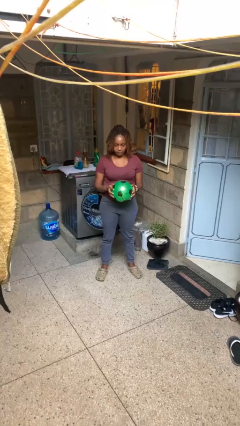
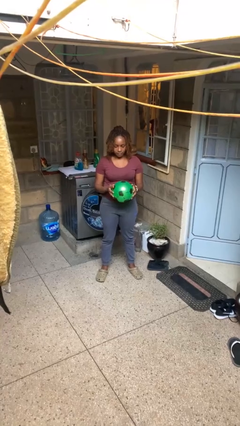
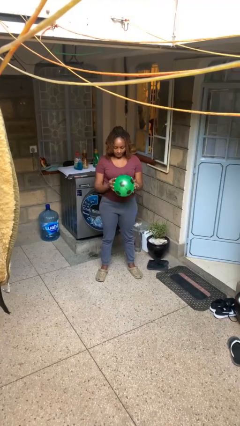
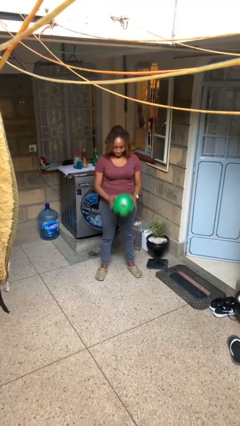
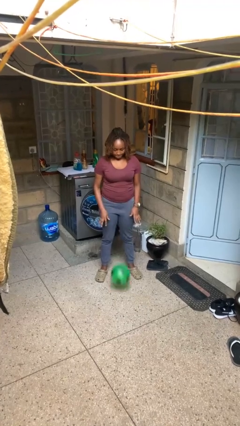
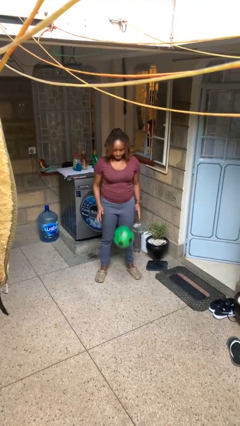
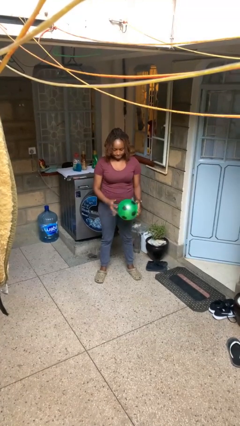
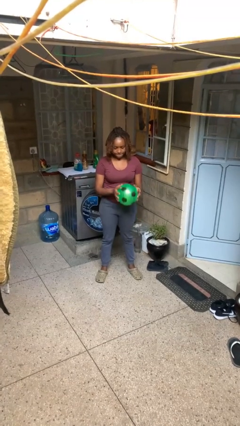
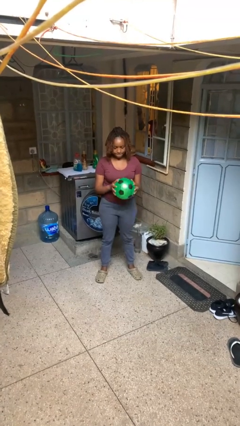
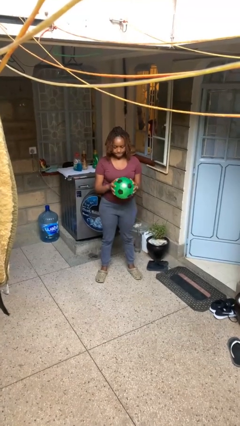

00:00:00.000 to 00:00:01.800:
person bounces ball on floor

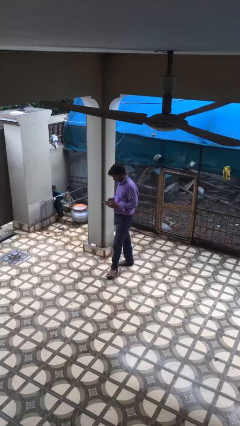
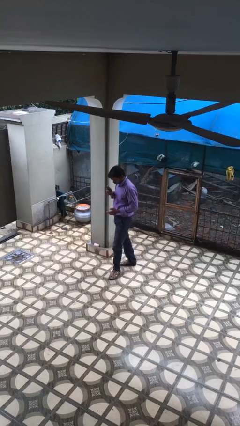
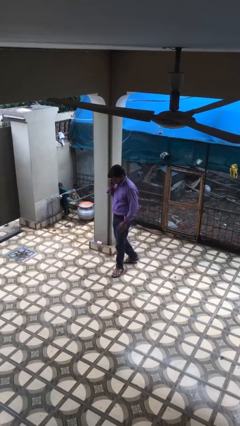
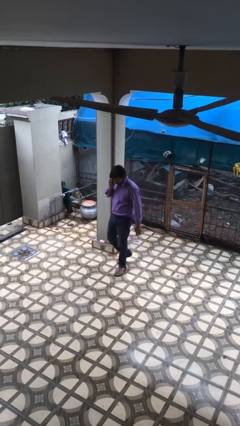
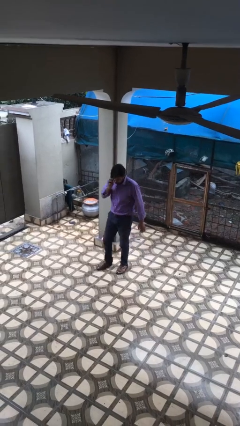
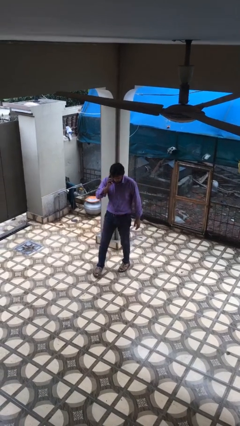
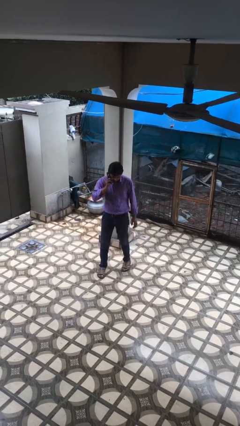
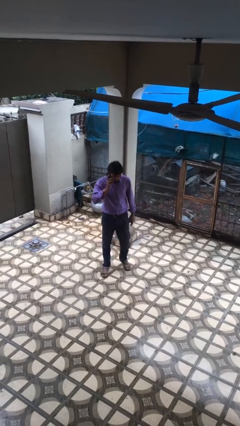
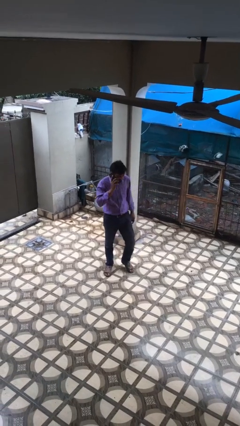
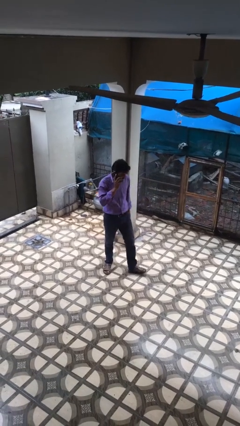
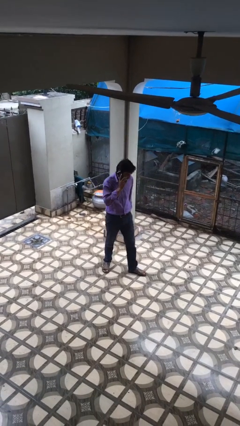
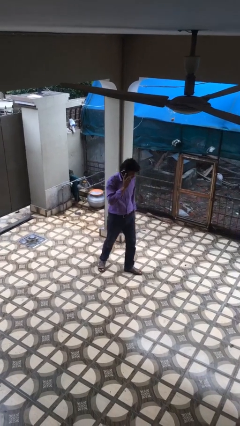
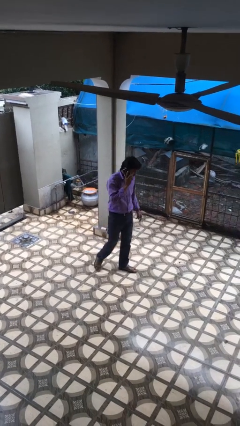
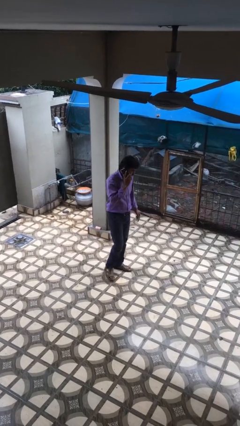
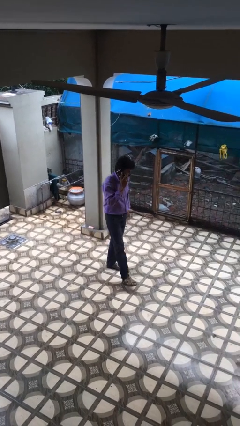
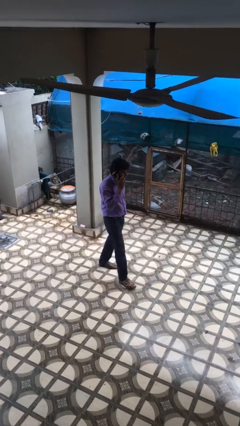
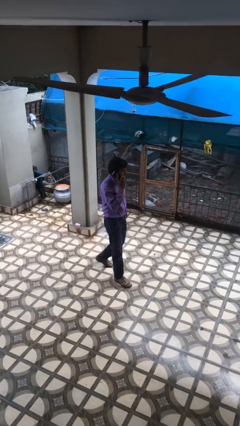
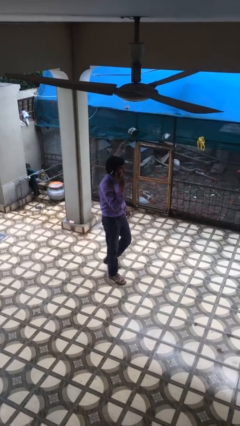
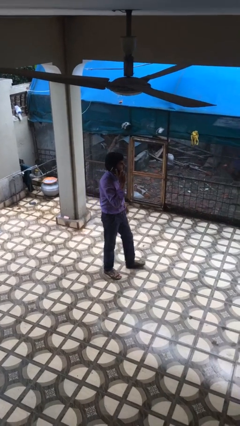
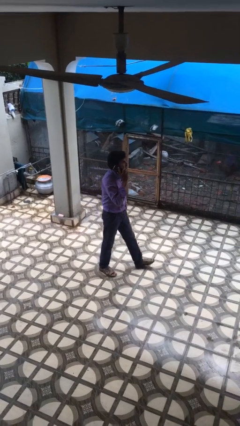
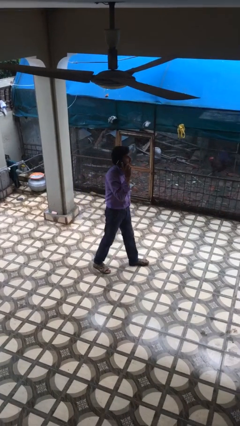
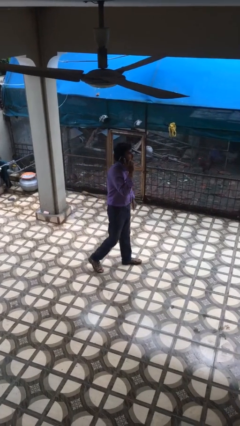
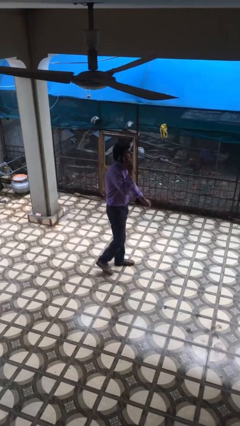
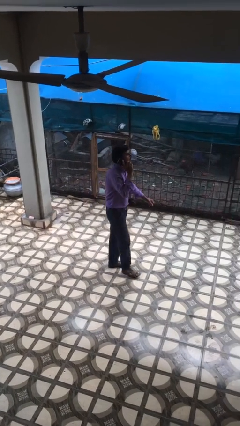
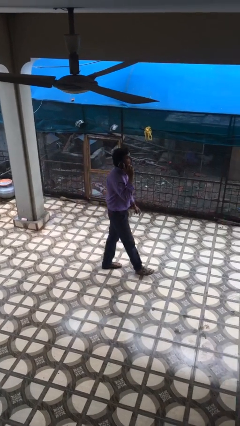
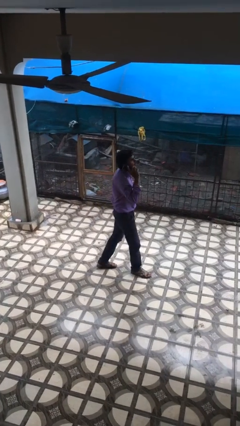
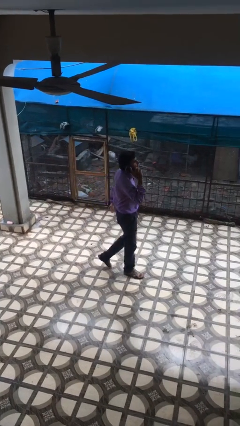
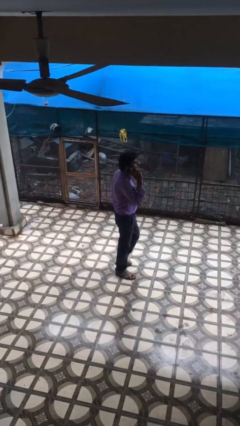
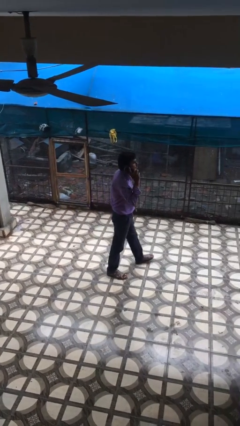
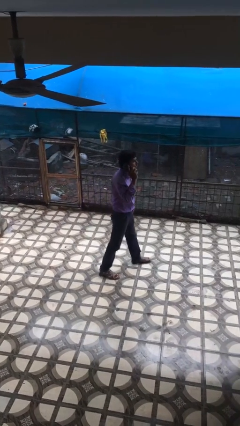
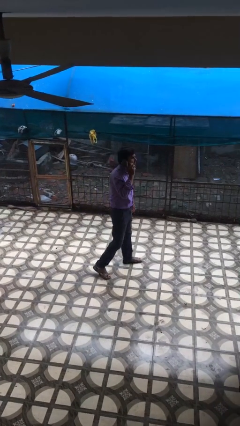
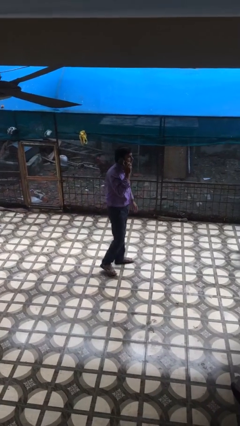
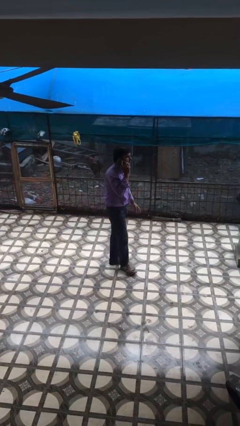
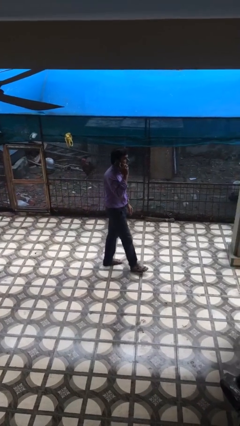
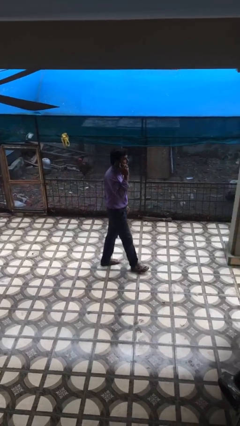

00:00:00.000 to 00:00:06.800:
person talks on phone

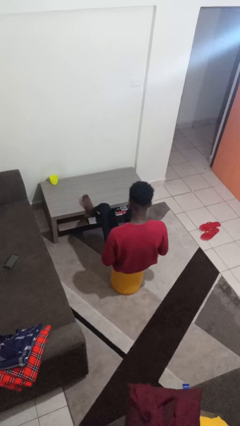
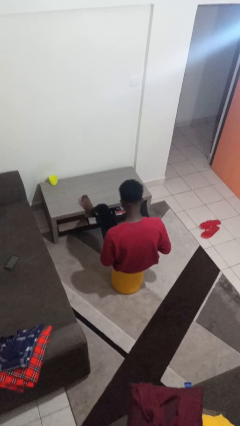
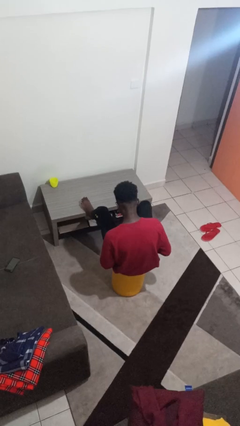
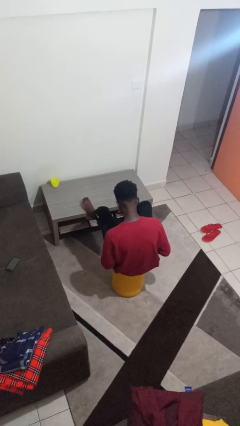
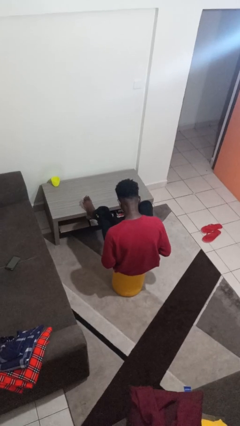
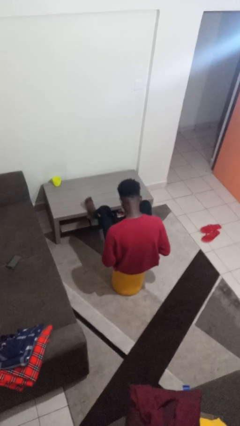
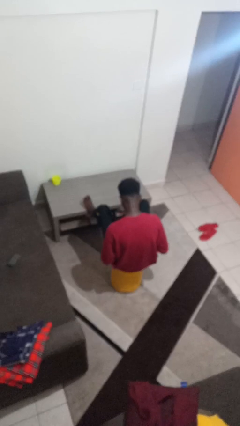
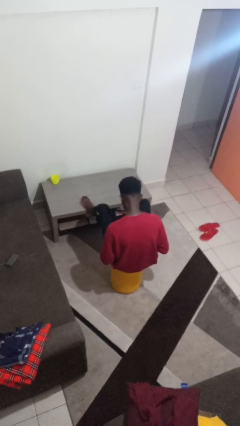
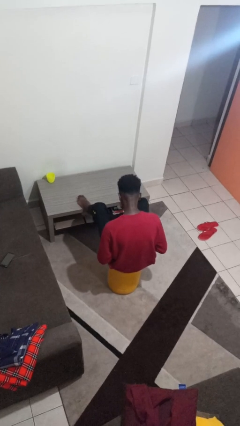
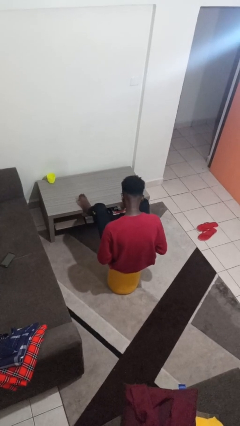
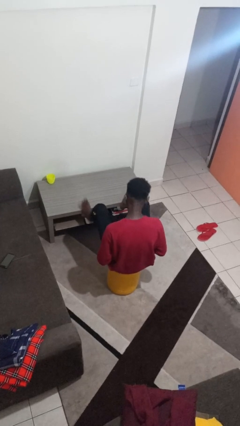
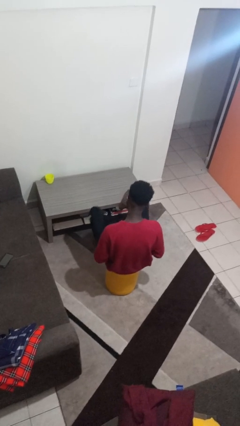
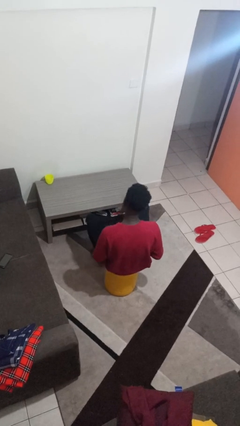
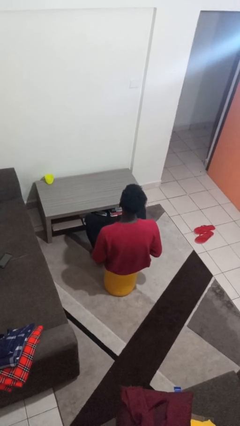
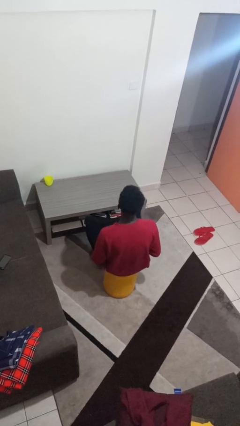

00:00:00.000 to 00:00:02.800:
person puts feet up

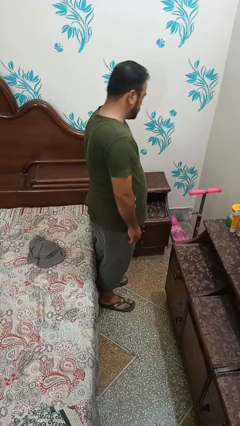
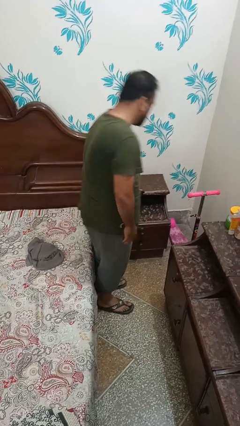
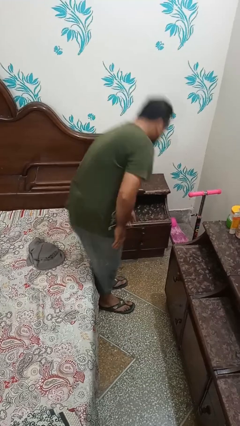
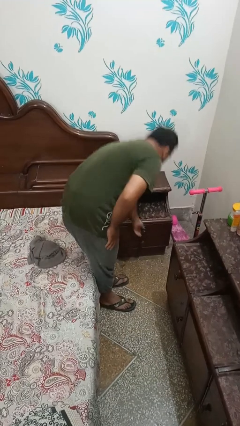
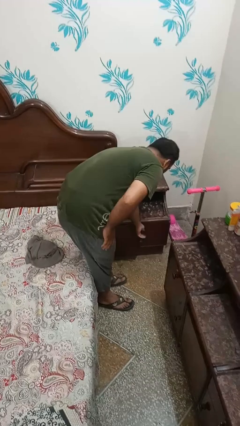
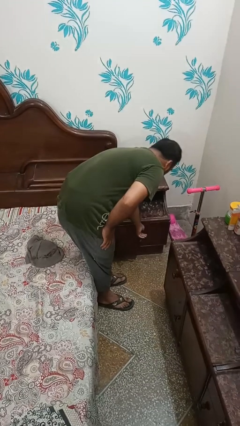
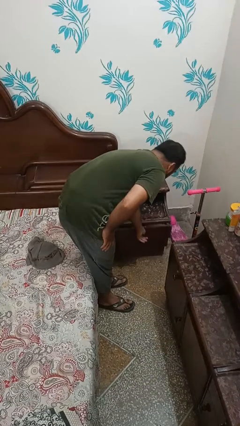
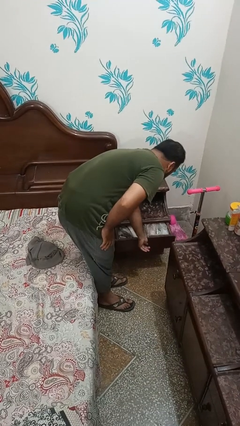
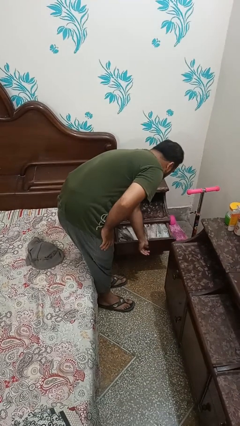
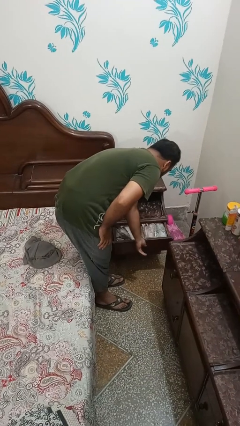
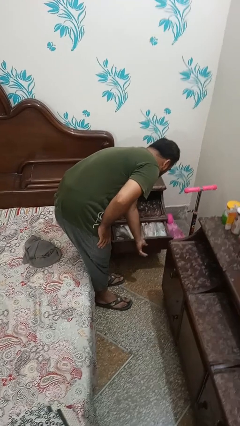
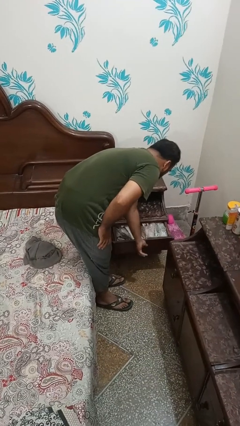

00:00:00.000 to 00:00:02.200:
person opens dresser drawer

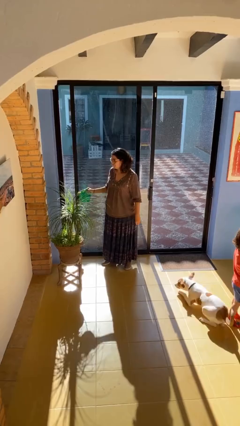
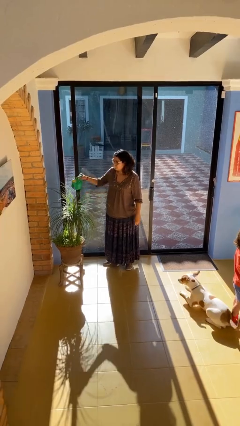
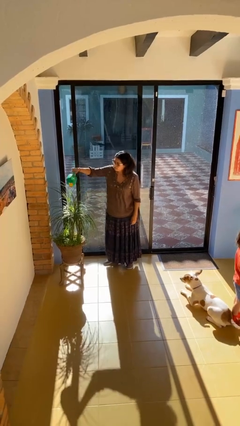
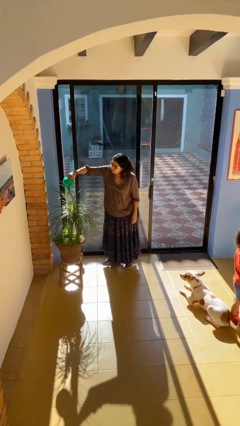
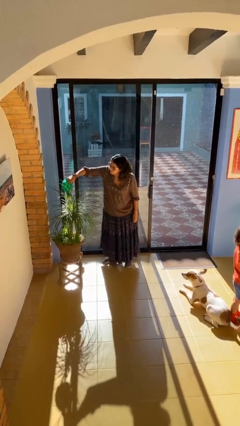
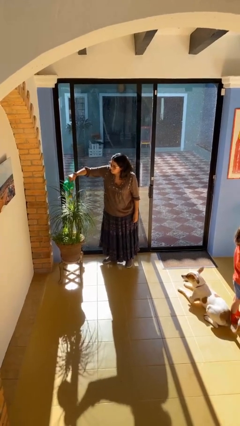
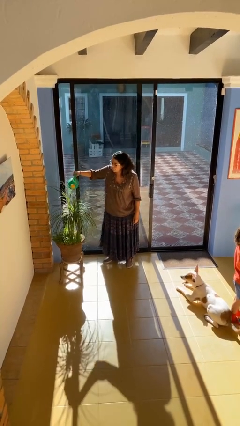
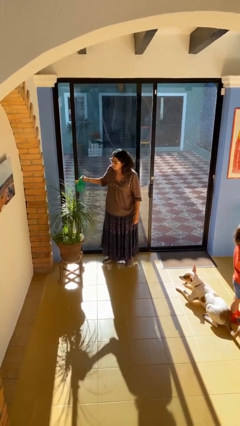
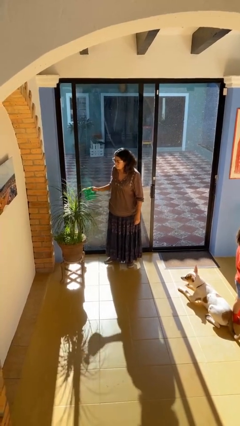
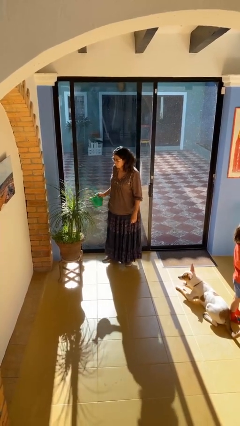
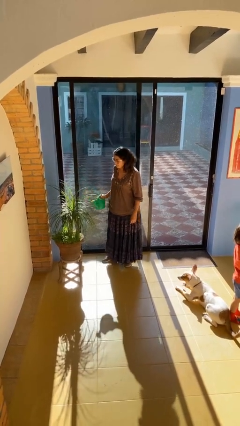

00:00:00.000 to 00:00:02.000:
person waters houseplant

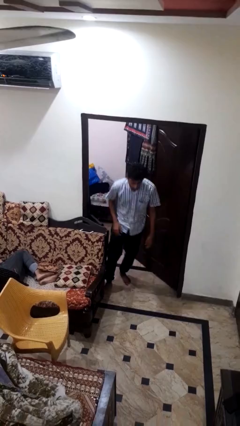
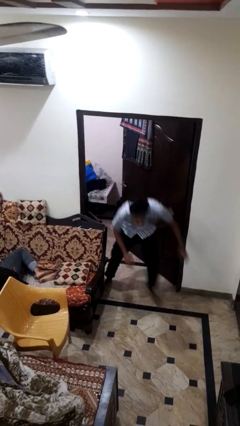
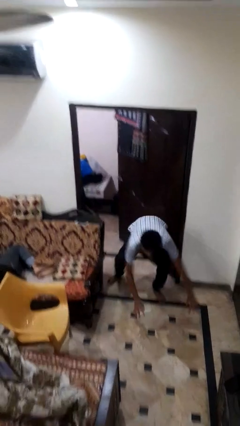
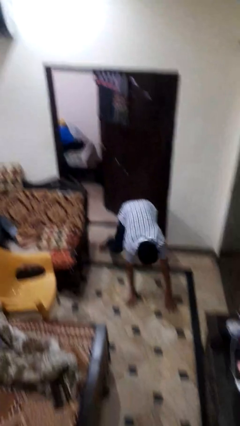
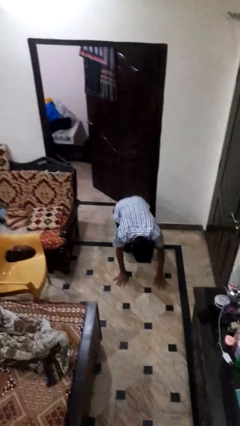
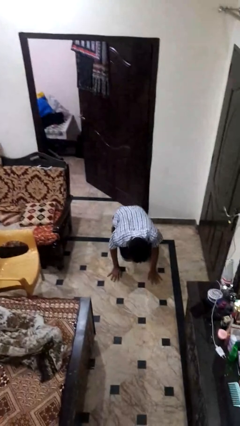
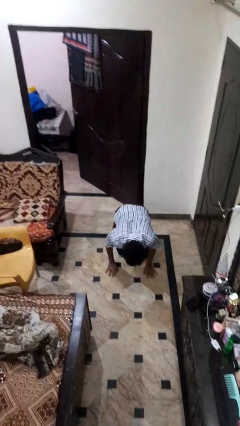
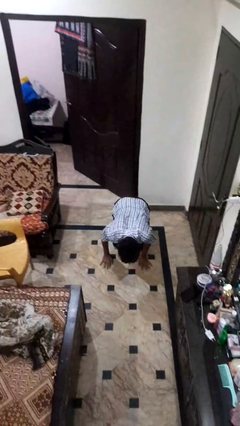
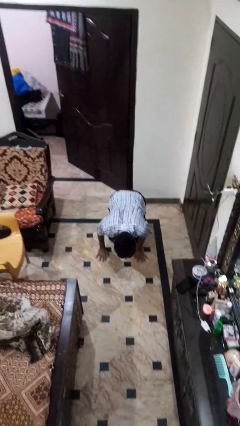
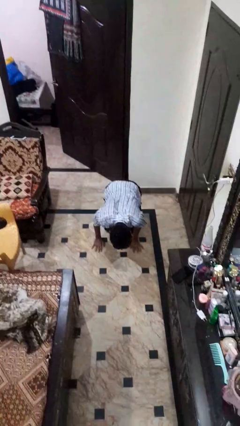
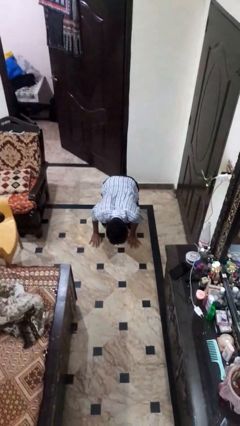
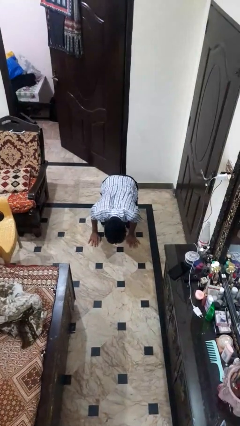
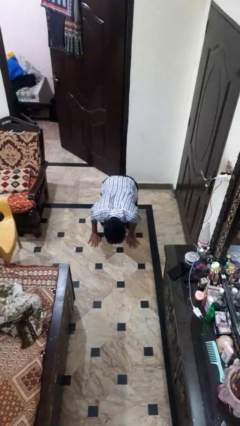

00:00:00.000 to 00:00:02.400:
person trips on object on floor
